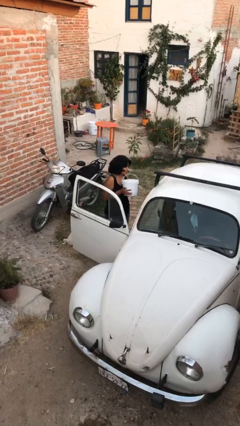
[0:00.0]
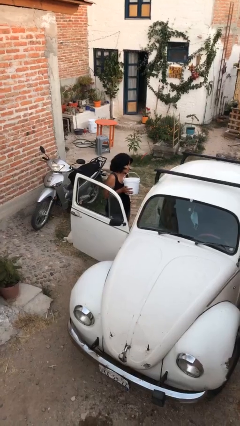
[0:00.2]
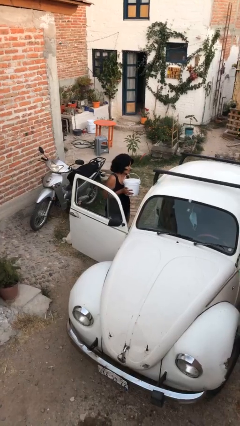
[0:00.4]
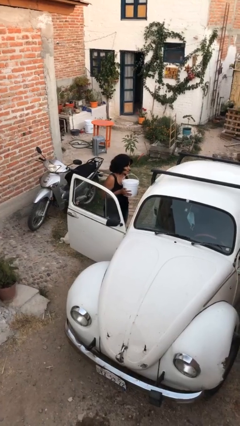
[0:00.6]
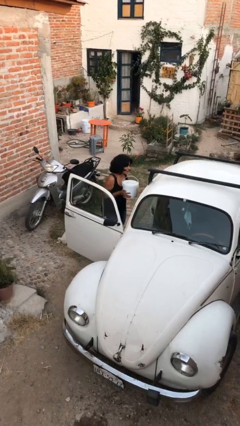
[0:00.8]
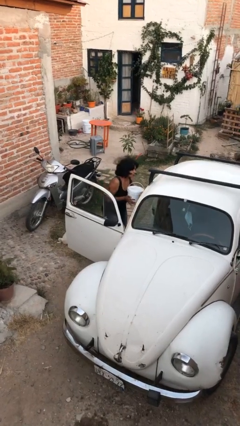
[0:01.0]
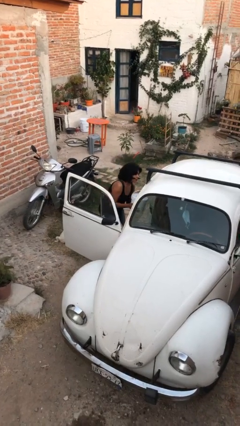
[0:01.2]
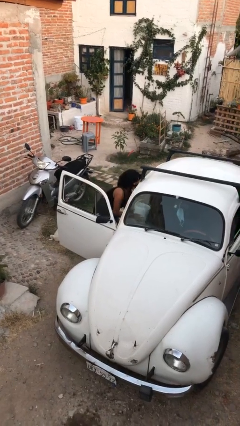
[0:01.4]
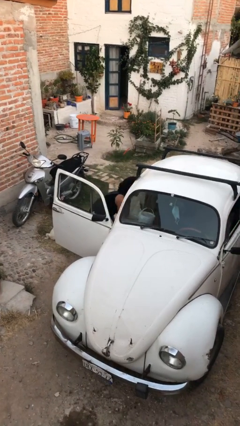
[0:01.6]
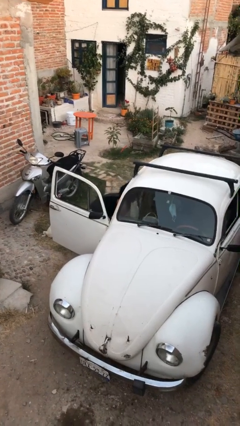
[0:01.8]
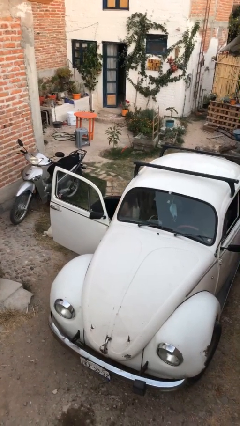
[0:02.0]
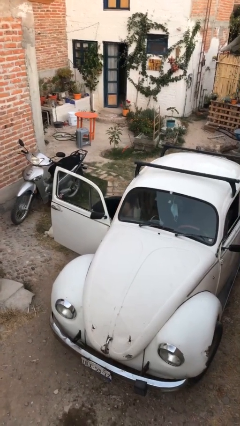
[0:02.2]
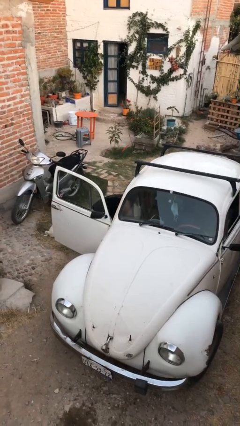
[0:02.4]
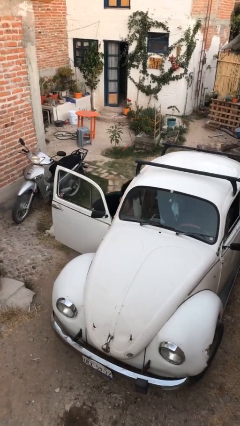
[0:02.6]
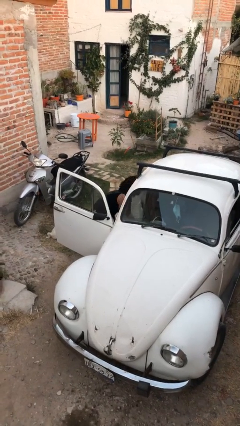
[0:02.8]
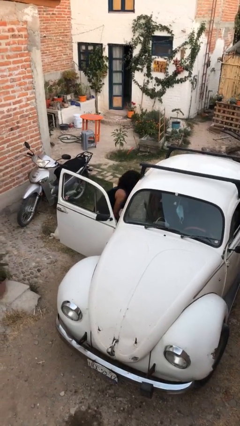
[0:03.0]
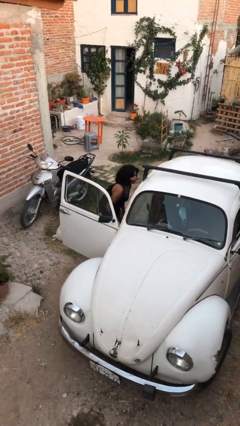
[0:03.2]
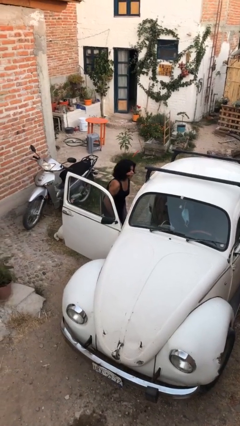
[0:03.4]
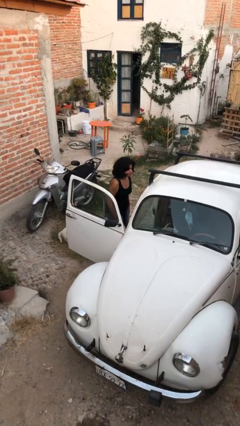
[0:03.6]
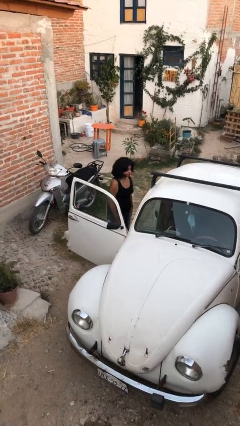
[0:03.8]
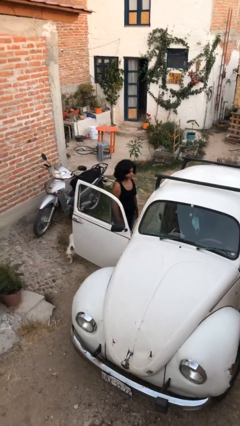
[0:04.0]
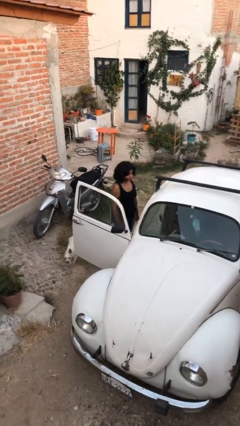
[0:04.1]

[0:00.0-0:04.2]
person loads car

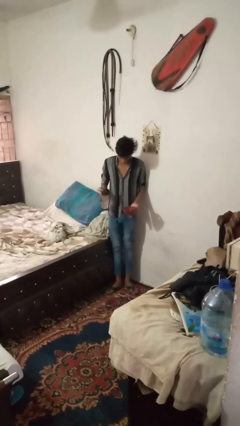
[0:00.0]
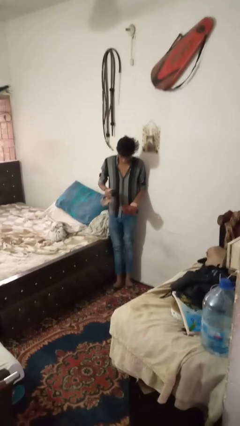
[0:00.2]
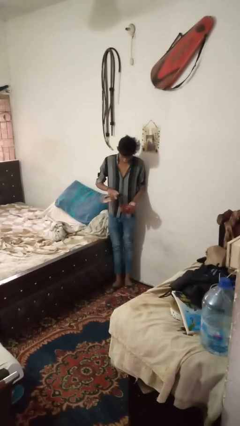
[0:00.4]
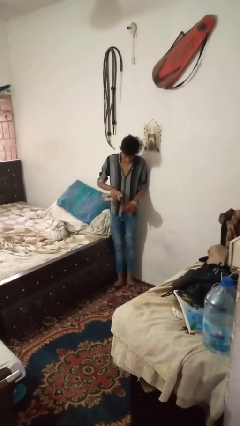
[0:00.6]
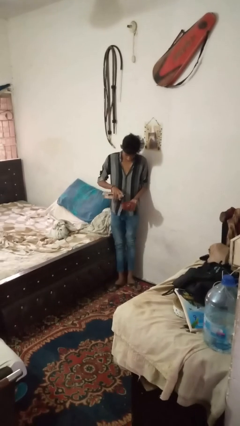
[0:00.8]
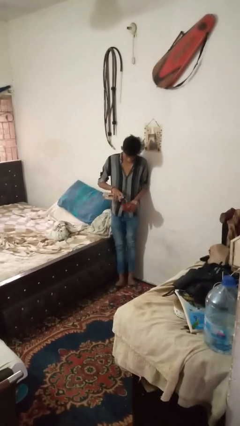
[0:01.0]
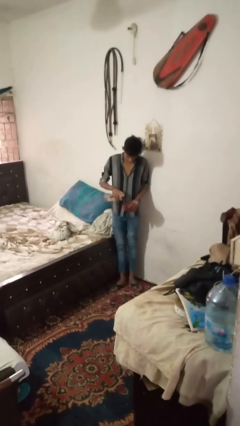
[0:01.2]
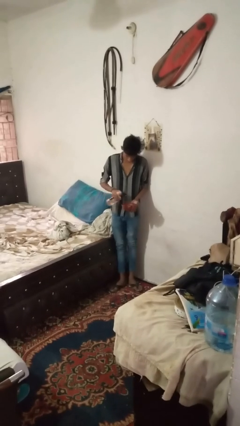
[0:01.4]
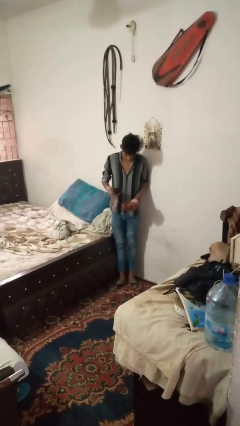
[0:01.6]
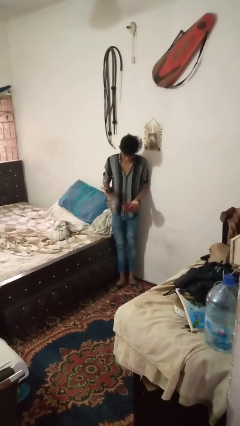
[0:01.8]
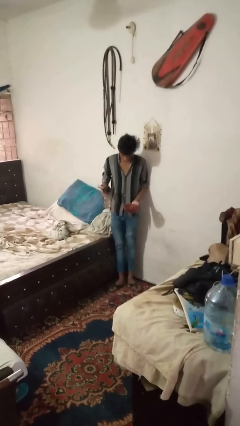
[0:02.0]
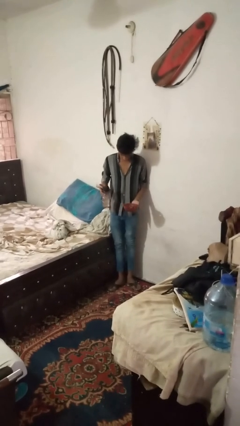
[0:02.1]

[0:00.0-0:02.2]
person pours liquid into cup

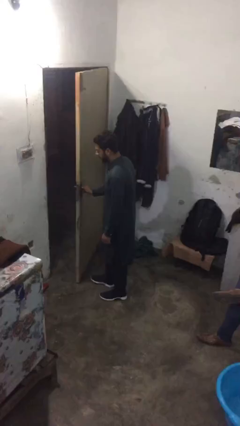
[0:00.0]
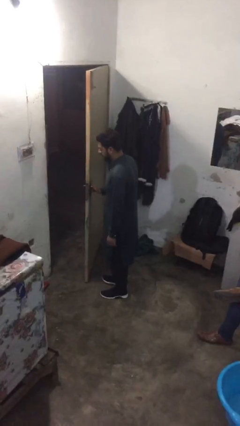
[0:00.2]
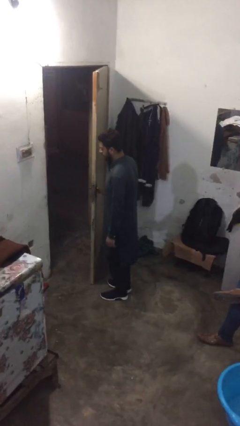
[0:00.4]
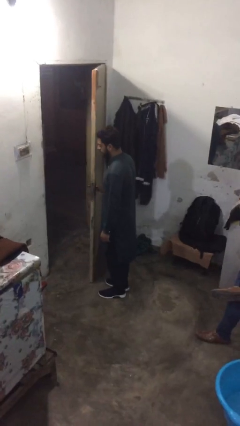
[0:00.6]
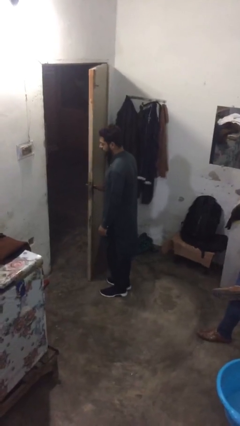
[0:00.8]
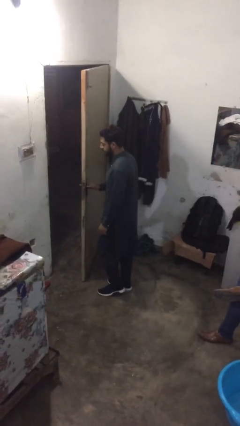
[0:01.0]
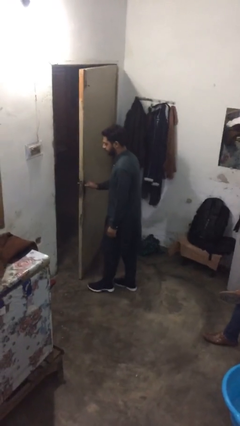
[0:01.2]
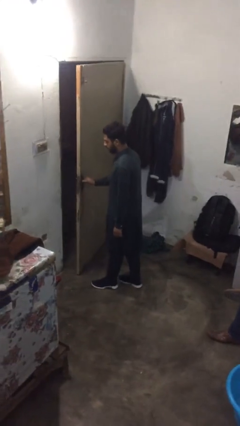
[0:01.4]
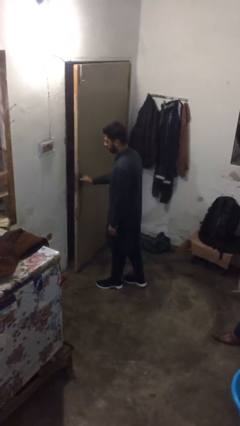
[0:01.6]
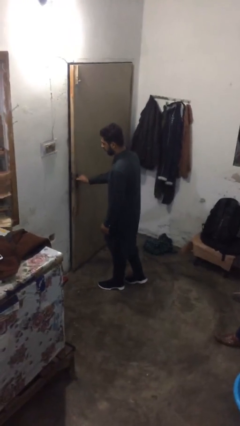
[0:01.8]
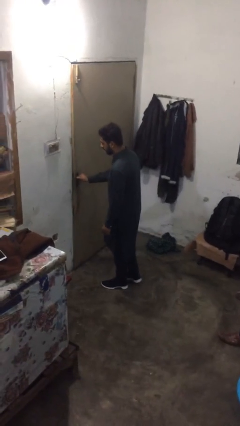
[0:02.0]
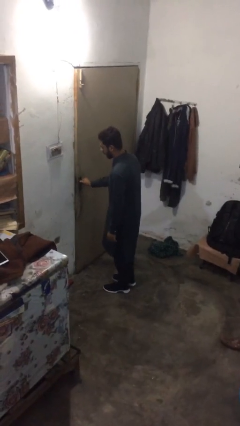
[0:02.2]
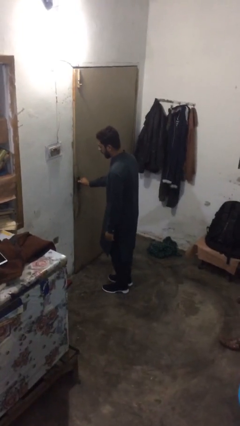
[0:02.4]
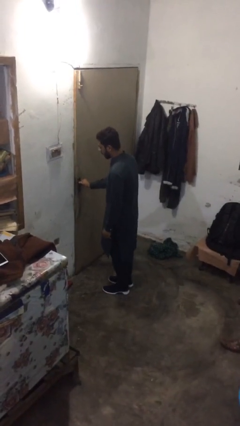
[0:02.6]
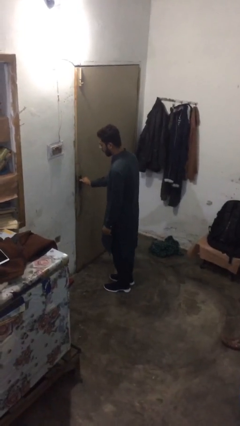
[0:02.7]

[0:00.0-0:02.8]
person closes facility door

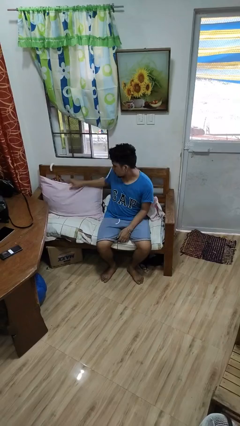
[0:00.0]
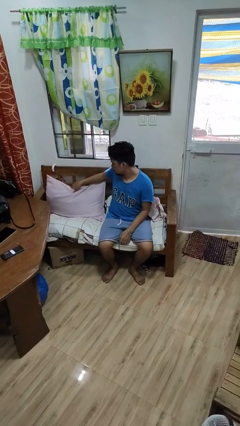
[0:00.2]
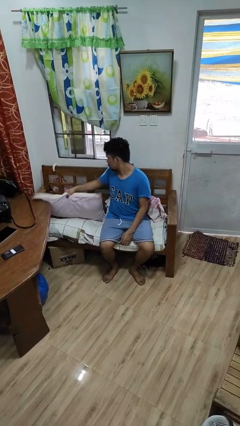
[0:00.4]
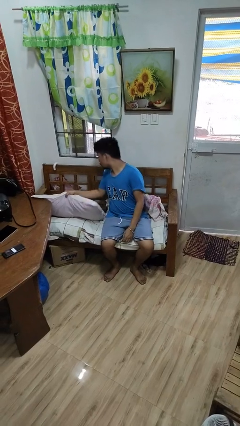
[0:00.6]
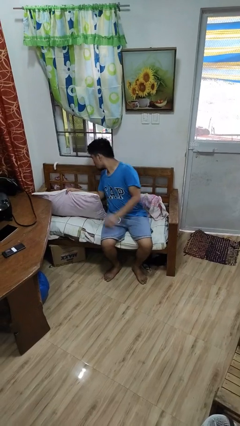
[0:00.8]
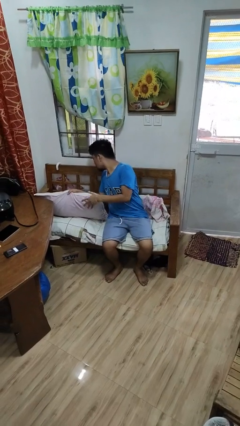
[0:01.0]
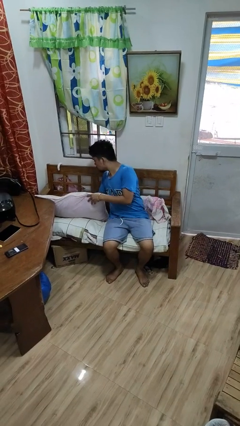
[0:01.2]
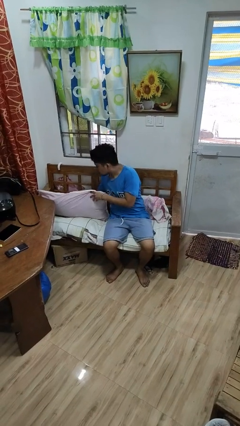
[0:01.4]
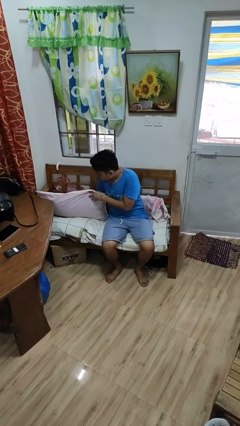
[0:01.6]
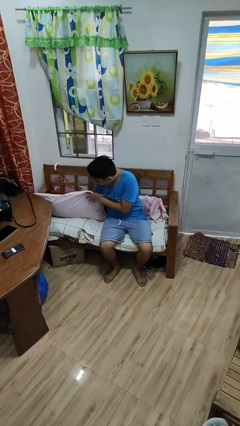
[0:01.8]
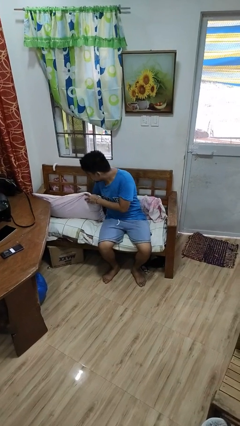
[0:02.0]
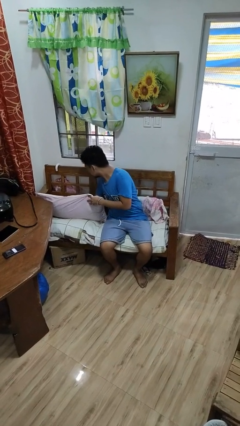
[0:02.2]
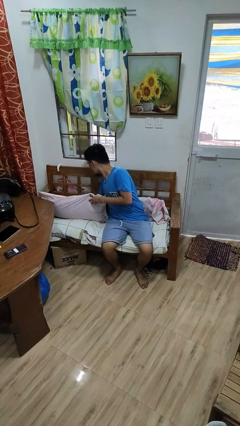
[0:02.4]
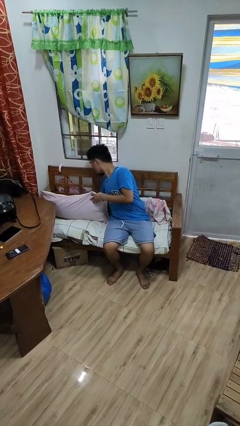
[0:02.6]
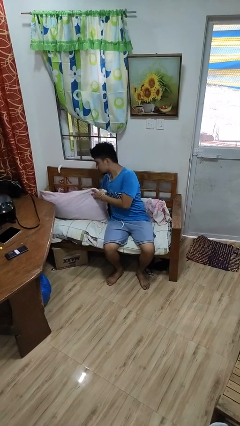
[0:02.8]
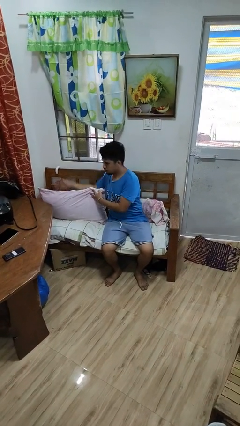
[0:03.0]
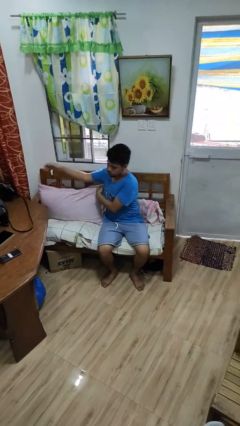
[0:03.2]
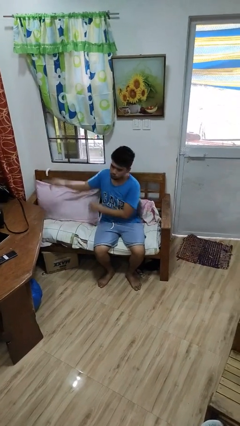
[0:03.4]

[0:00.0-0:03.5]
person searches in couch

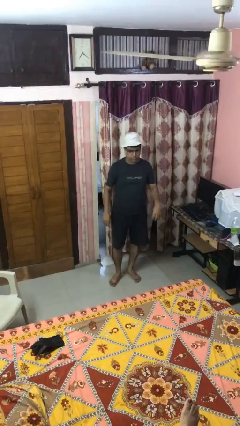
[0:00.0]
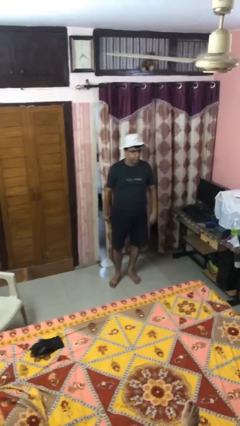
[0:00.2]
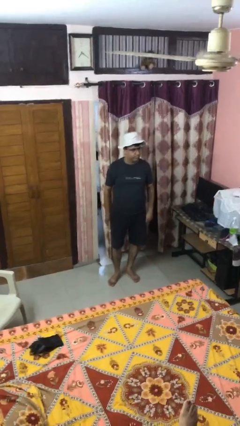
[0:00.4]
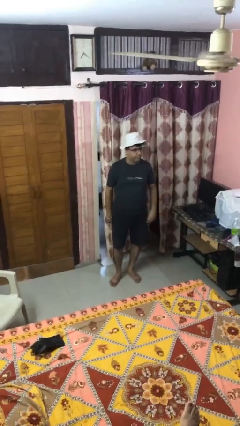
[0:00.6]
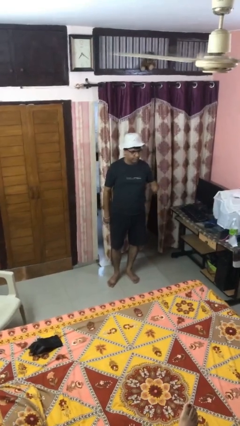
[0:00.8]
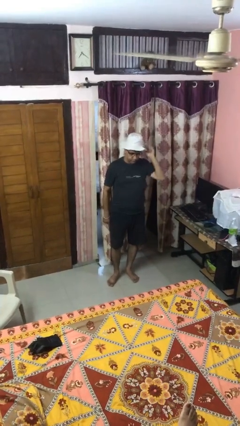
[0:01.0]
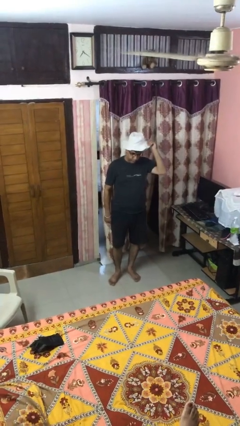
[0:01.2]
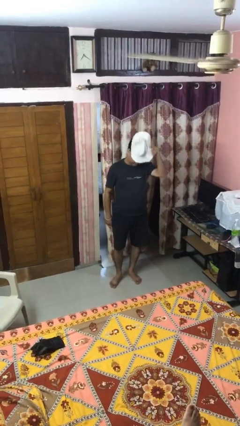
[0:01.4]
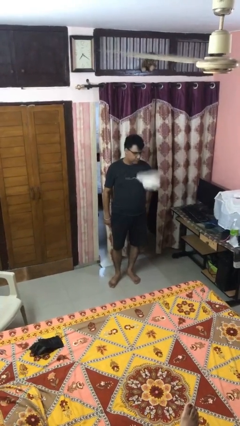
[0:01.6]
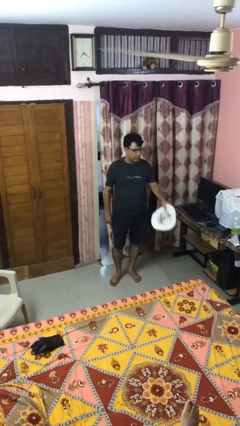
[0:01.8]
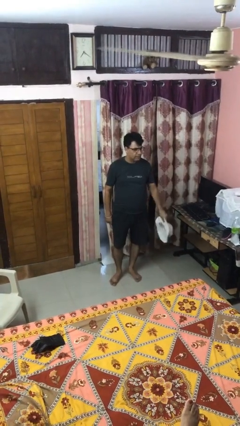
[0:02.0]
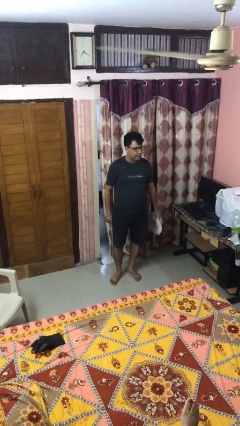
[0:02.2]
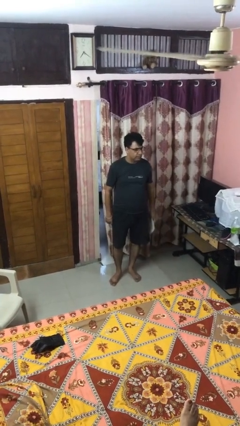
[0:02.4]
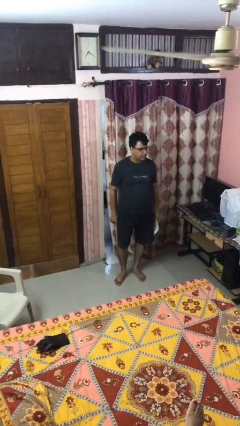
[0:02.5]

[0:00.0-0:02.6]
person takes off hat

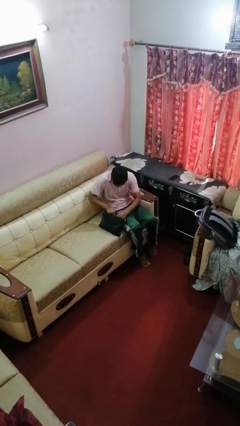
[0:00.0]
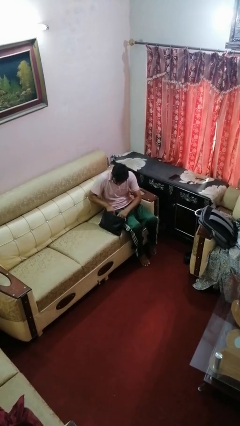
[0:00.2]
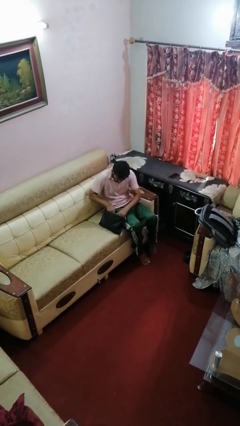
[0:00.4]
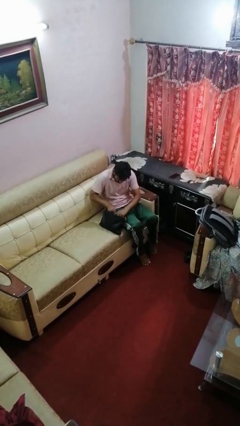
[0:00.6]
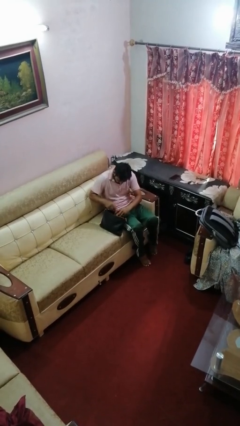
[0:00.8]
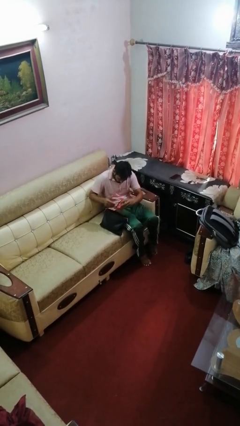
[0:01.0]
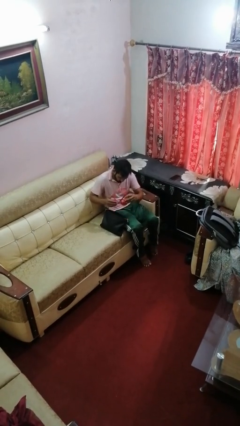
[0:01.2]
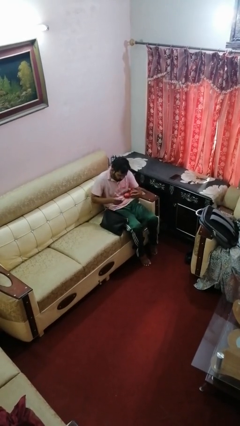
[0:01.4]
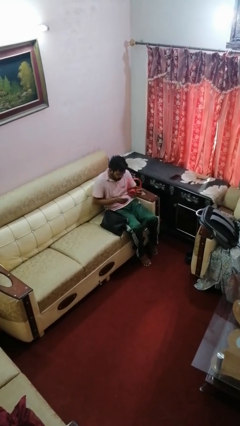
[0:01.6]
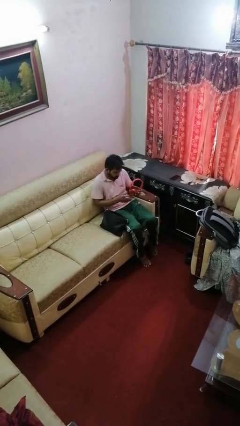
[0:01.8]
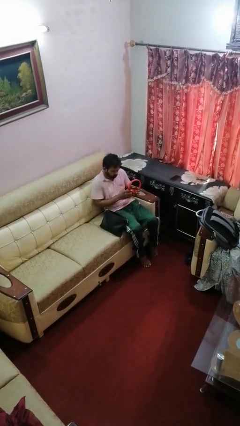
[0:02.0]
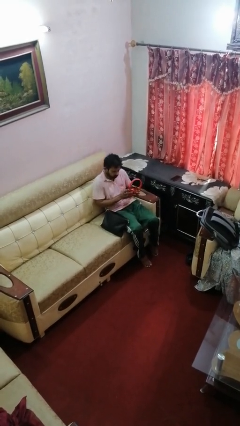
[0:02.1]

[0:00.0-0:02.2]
person takes object from purse
